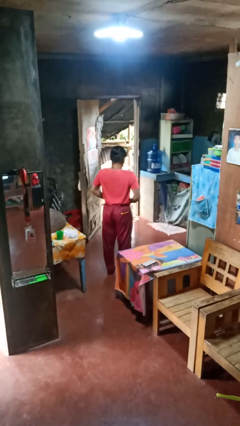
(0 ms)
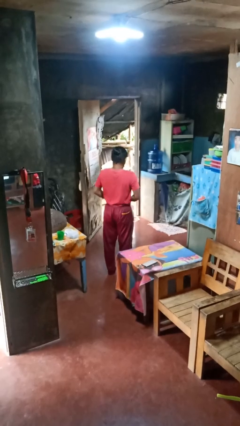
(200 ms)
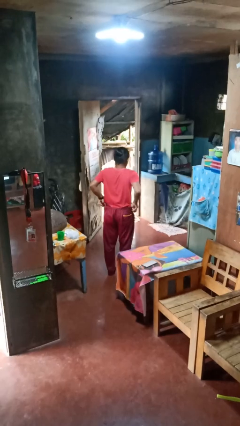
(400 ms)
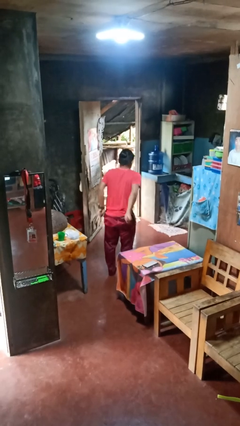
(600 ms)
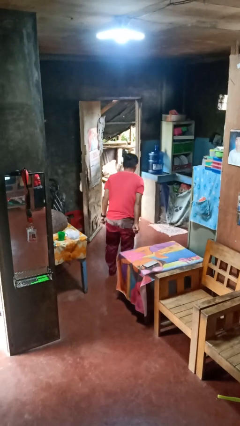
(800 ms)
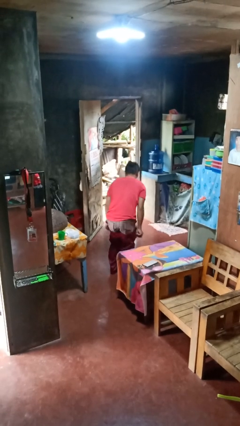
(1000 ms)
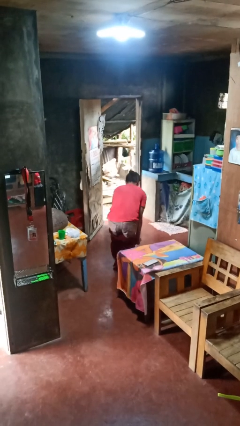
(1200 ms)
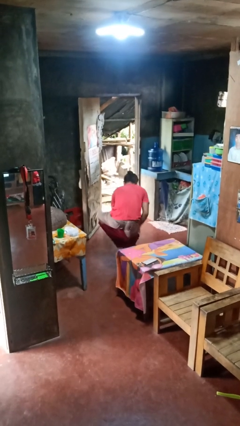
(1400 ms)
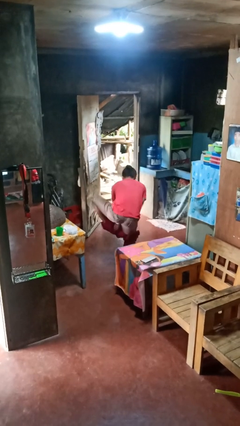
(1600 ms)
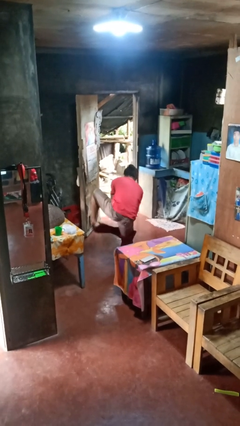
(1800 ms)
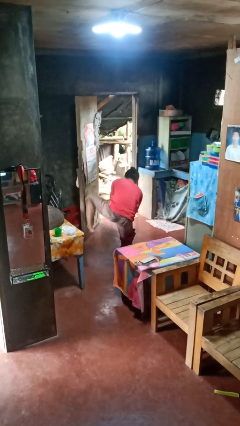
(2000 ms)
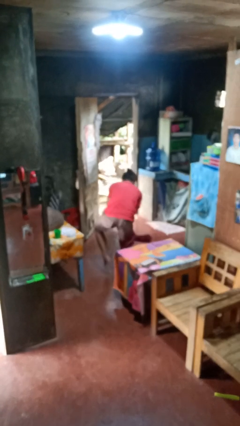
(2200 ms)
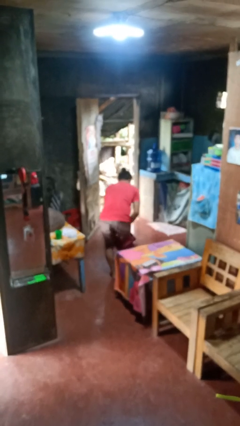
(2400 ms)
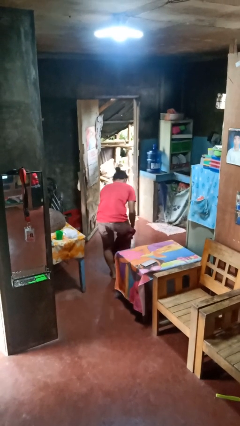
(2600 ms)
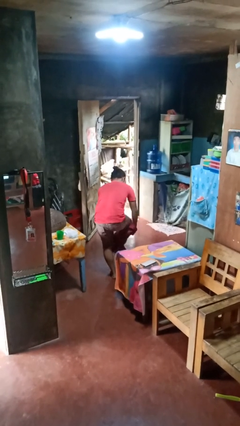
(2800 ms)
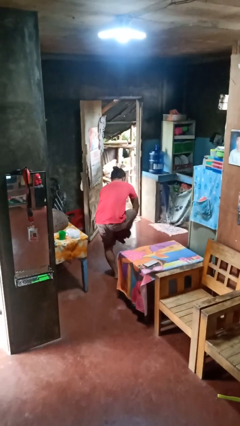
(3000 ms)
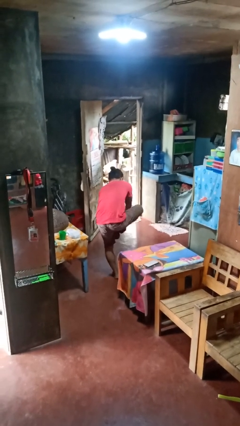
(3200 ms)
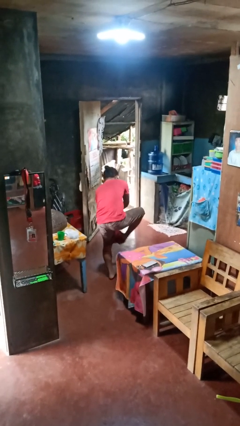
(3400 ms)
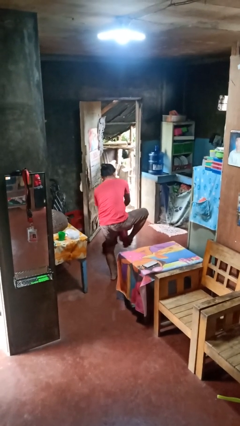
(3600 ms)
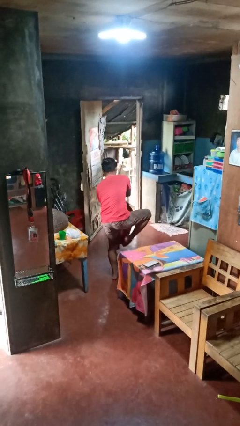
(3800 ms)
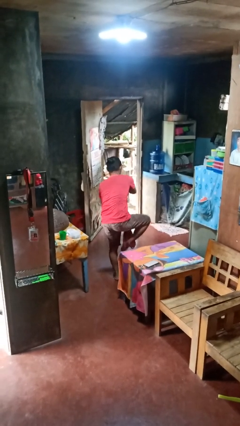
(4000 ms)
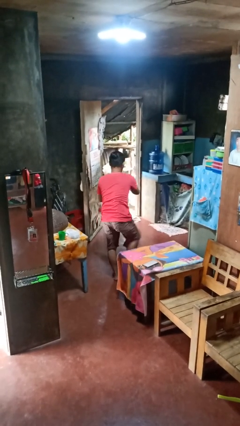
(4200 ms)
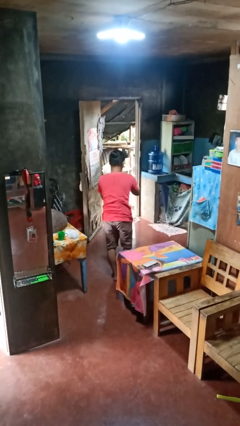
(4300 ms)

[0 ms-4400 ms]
person takes off pants

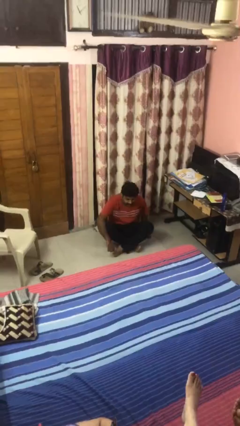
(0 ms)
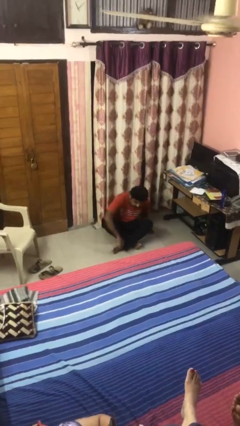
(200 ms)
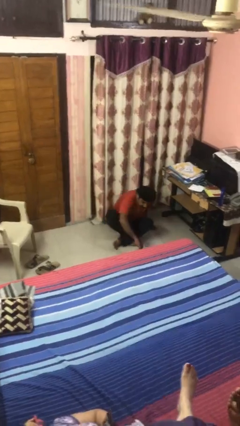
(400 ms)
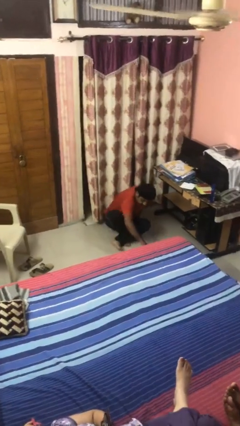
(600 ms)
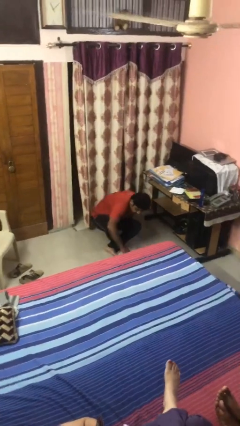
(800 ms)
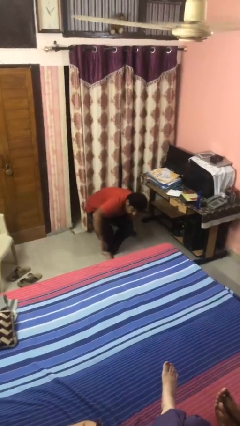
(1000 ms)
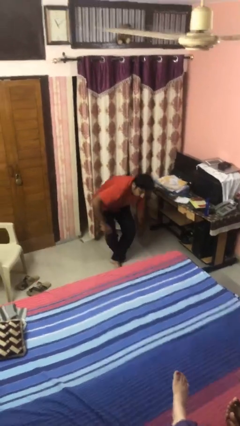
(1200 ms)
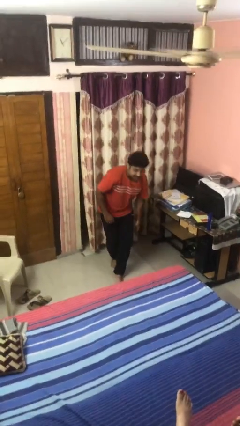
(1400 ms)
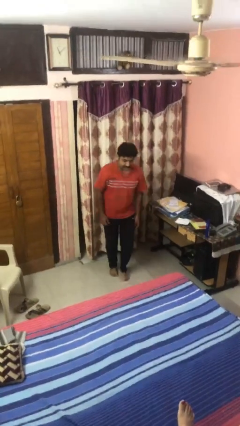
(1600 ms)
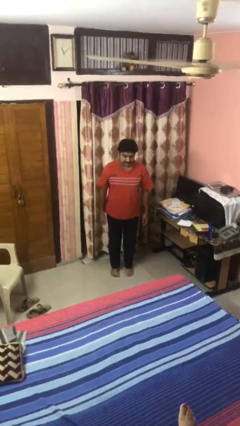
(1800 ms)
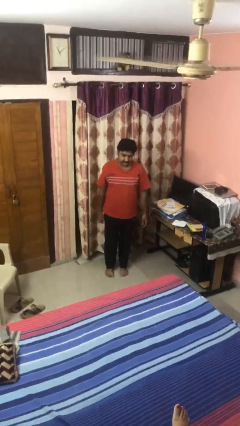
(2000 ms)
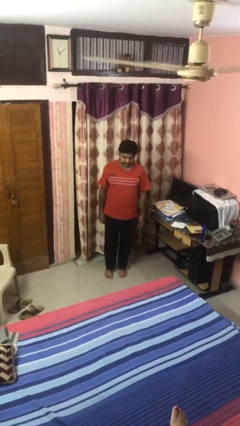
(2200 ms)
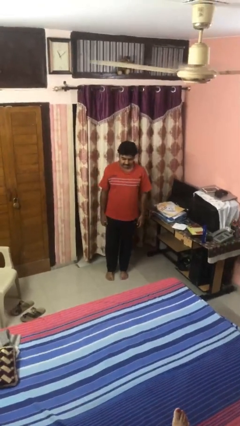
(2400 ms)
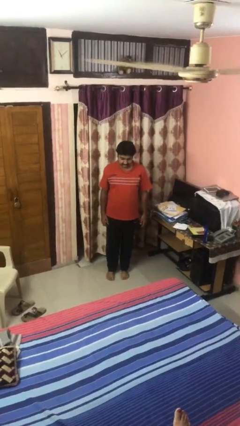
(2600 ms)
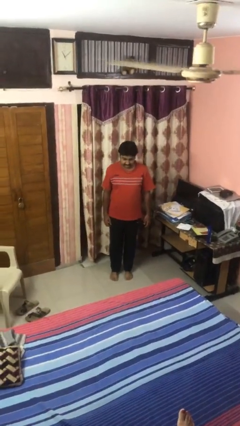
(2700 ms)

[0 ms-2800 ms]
person stands up from floor

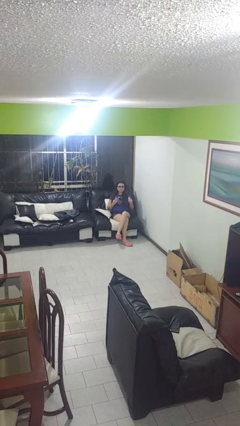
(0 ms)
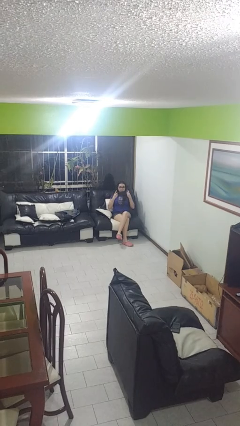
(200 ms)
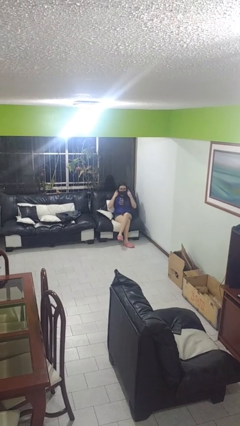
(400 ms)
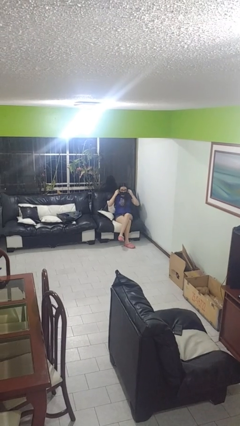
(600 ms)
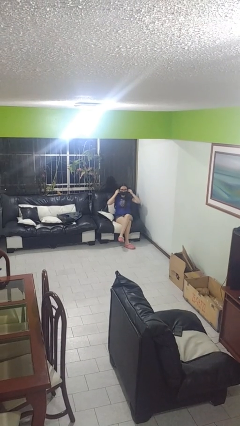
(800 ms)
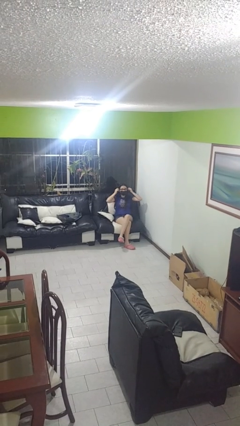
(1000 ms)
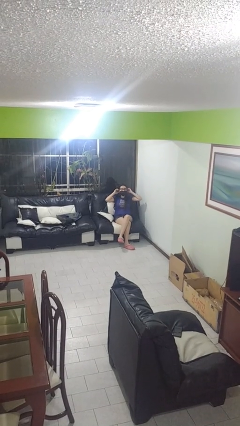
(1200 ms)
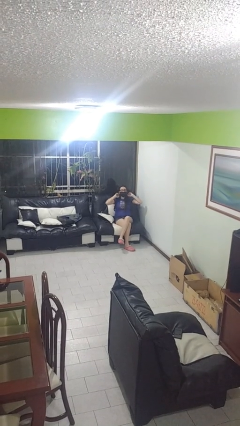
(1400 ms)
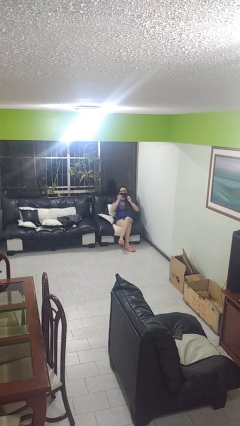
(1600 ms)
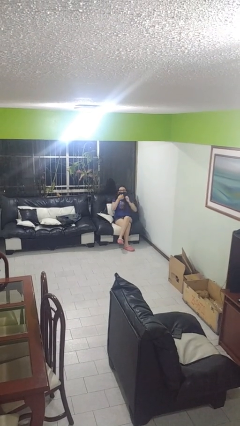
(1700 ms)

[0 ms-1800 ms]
person puts on facemask

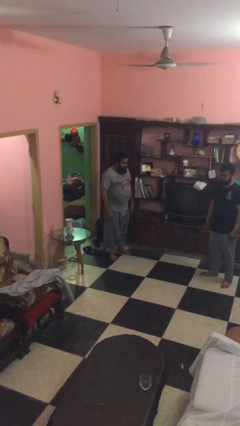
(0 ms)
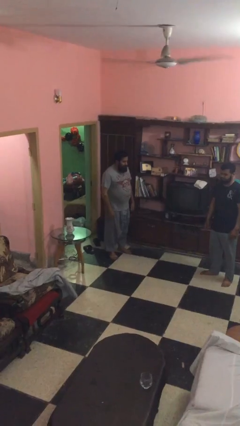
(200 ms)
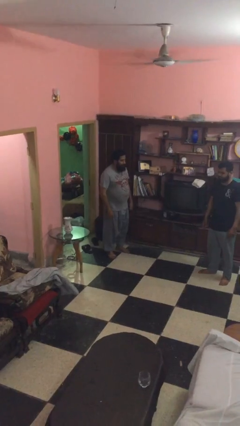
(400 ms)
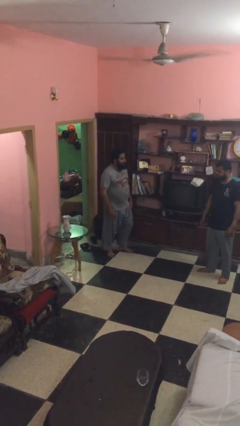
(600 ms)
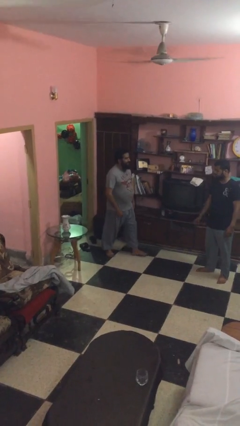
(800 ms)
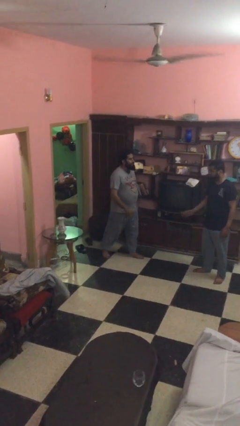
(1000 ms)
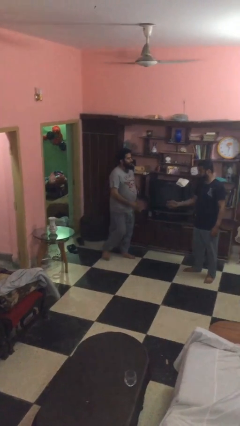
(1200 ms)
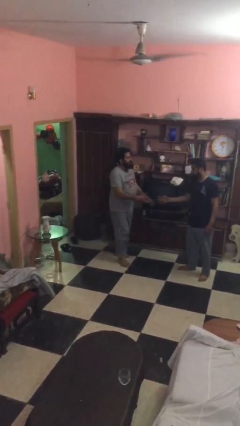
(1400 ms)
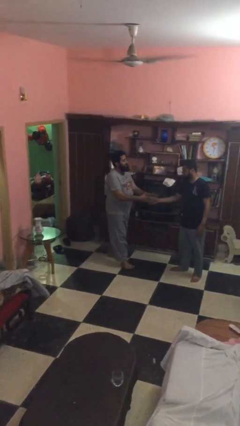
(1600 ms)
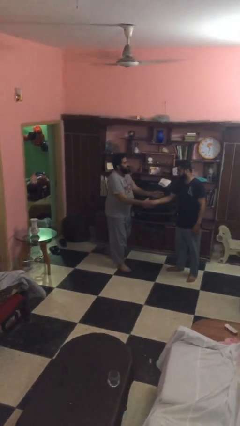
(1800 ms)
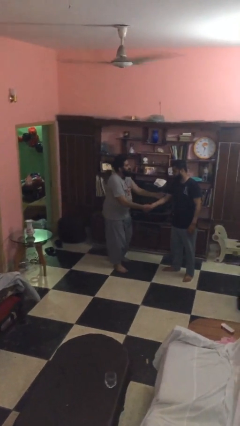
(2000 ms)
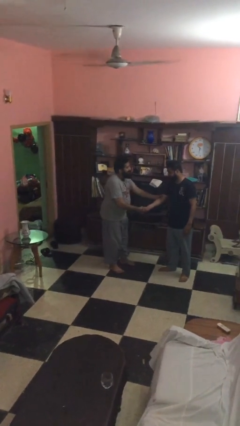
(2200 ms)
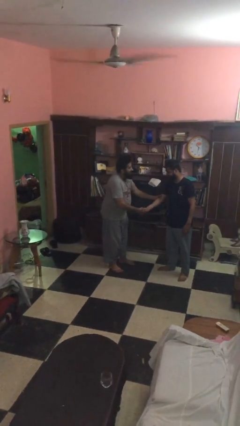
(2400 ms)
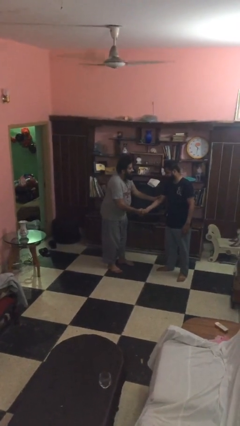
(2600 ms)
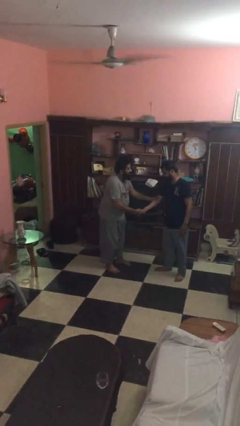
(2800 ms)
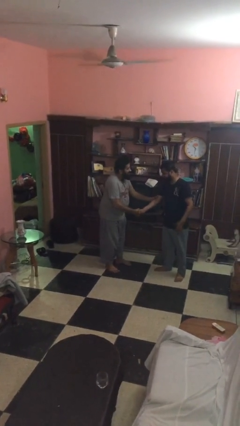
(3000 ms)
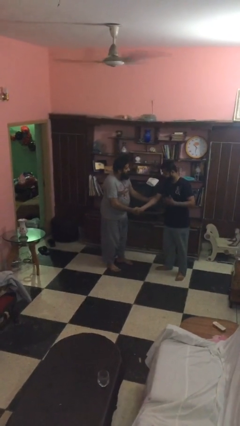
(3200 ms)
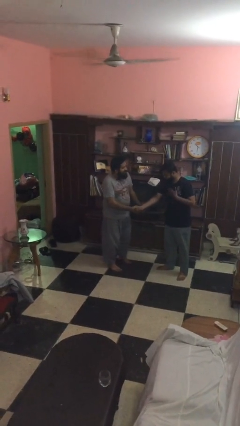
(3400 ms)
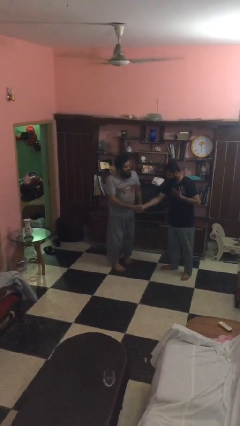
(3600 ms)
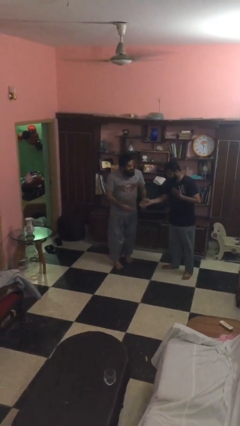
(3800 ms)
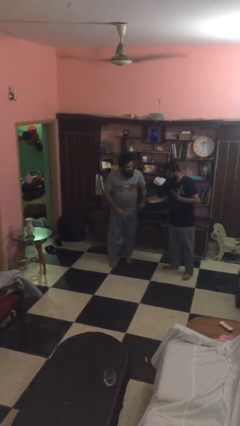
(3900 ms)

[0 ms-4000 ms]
person shakes hand

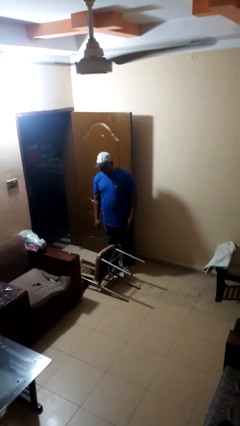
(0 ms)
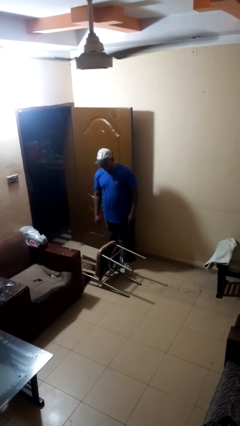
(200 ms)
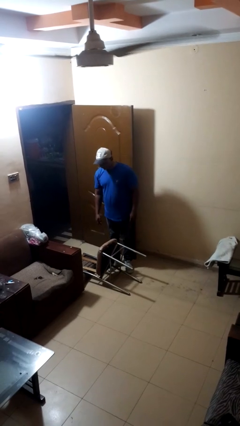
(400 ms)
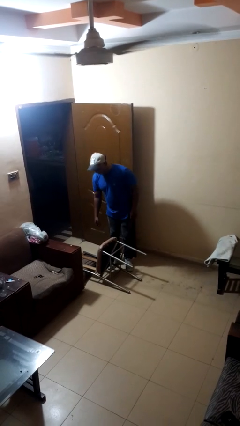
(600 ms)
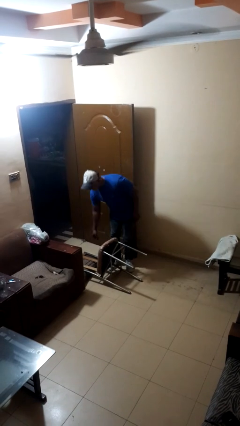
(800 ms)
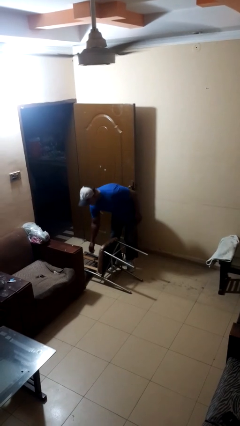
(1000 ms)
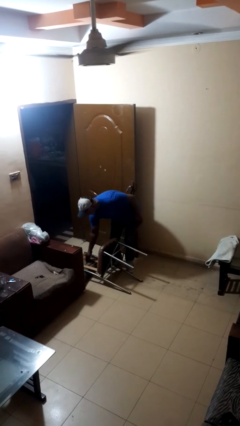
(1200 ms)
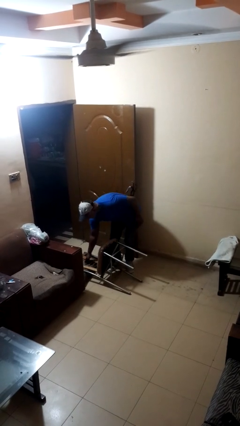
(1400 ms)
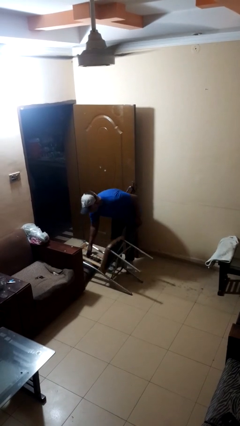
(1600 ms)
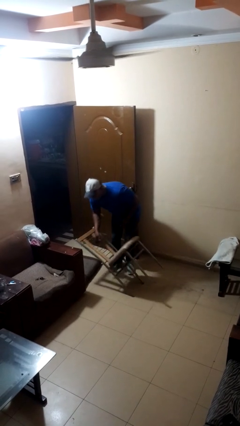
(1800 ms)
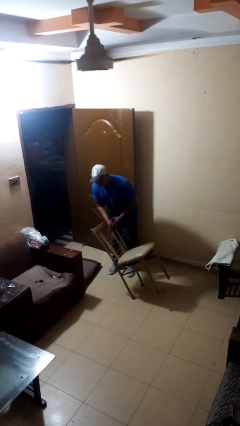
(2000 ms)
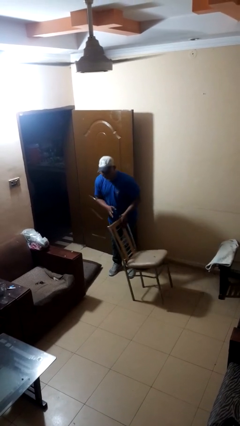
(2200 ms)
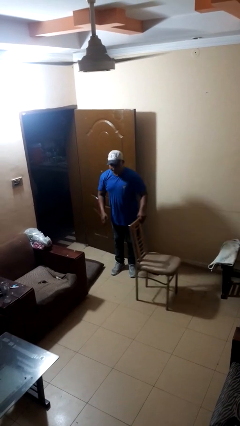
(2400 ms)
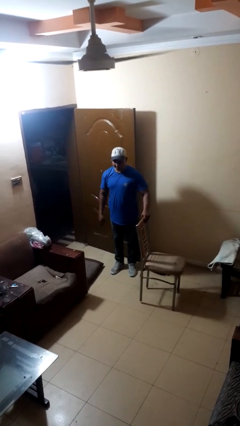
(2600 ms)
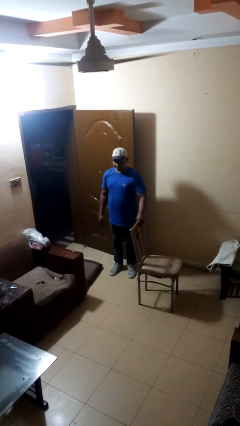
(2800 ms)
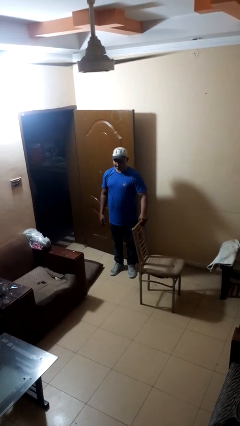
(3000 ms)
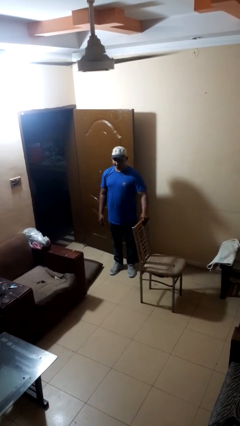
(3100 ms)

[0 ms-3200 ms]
person sets upright furniture

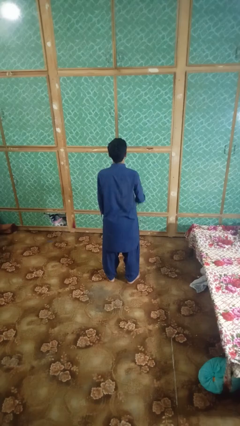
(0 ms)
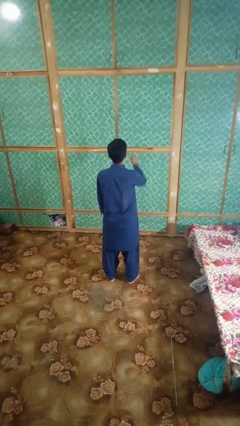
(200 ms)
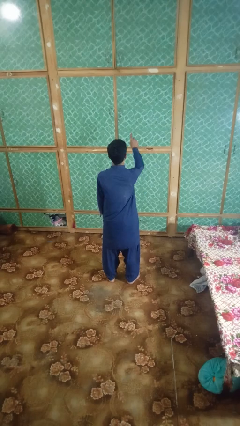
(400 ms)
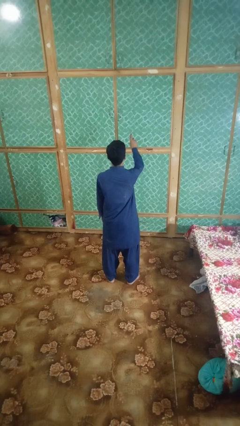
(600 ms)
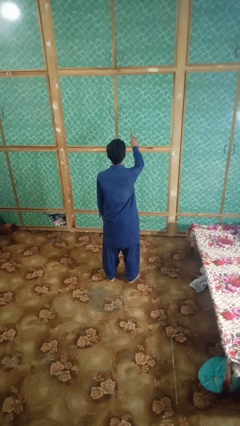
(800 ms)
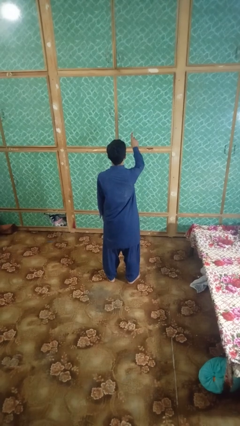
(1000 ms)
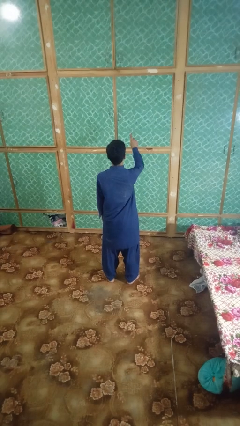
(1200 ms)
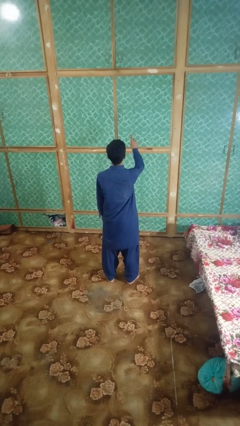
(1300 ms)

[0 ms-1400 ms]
person gestures number one
